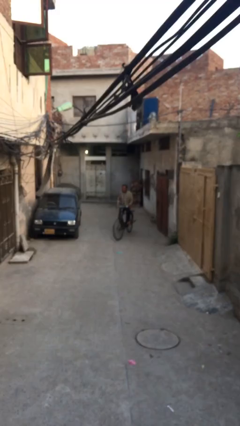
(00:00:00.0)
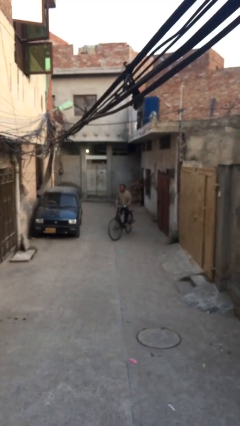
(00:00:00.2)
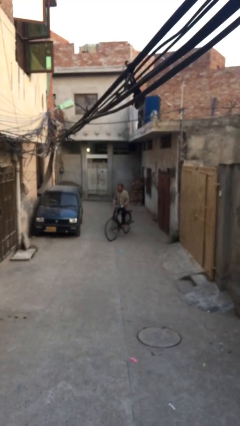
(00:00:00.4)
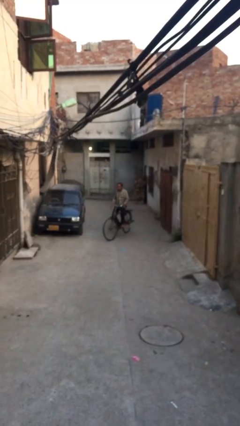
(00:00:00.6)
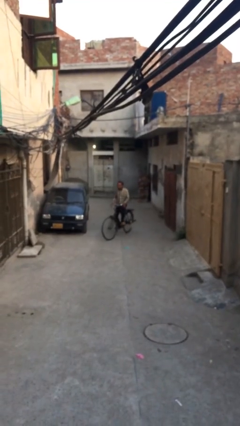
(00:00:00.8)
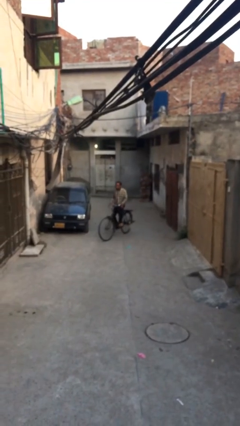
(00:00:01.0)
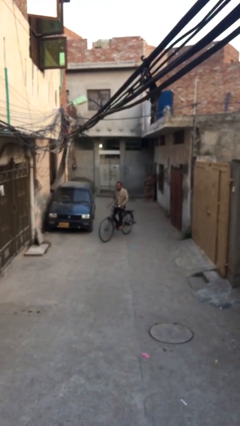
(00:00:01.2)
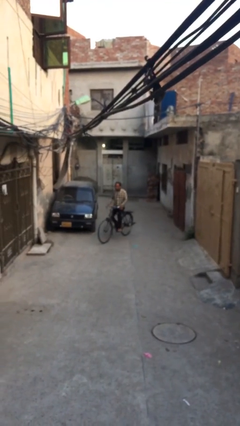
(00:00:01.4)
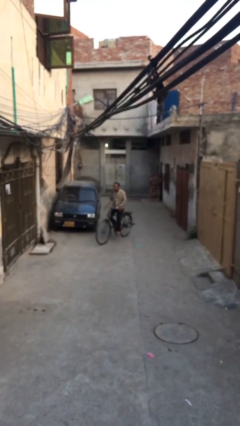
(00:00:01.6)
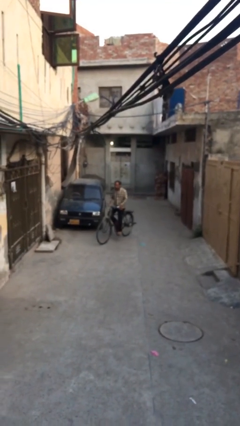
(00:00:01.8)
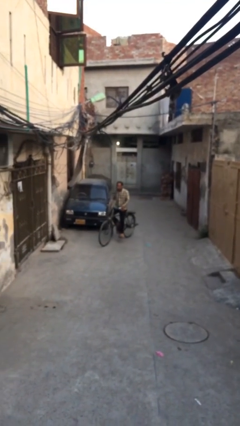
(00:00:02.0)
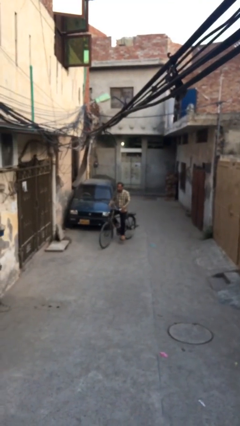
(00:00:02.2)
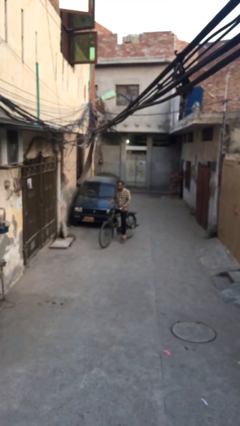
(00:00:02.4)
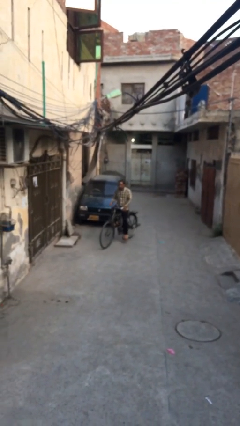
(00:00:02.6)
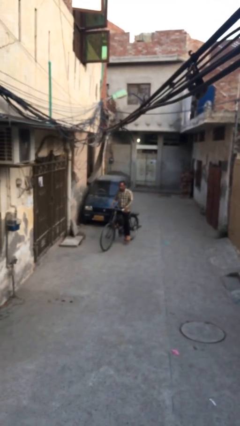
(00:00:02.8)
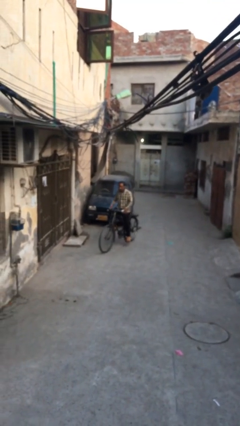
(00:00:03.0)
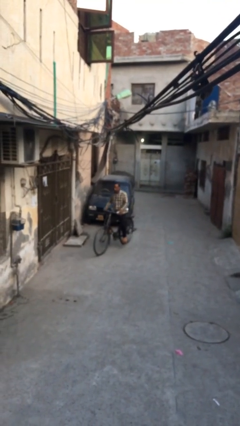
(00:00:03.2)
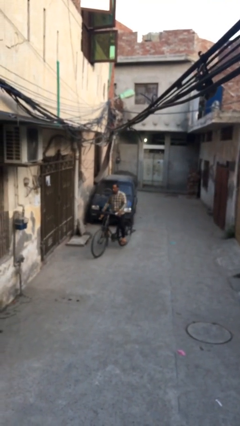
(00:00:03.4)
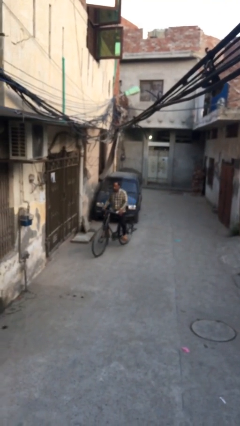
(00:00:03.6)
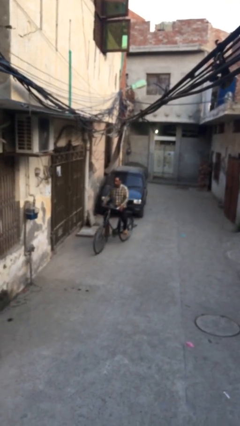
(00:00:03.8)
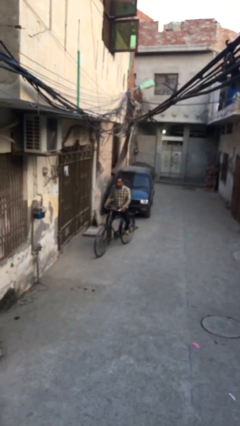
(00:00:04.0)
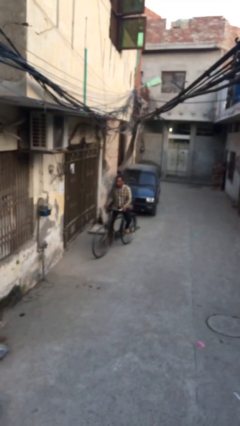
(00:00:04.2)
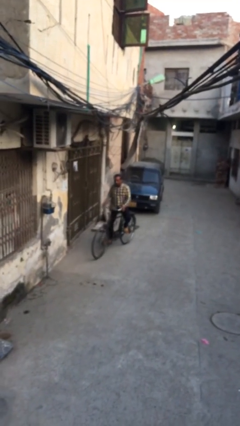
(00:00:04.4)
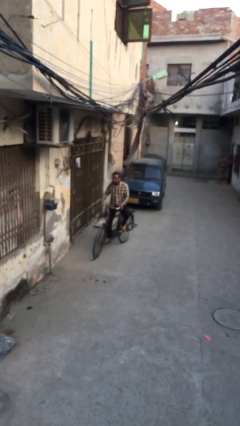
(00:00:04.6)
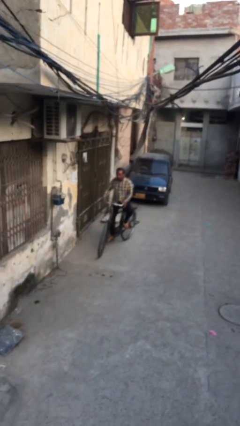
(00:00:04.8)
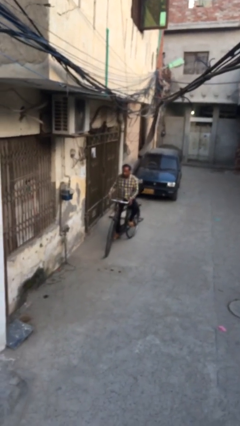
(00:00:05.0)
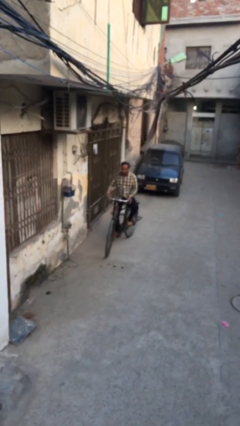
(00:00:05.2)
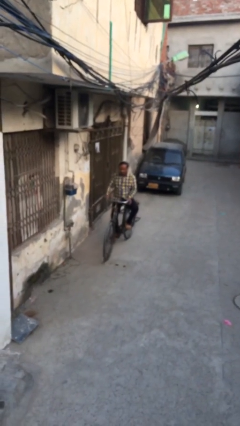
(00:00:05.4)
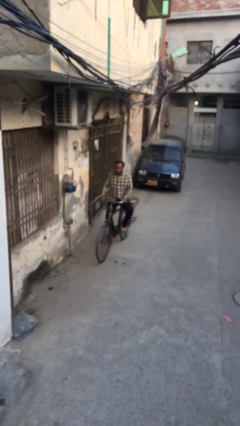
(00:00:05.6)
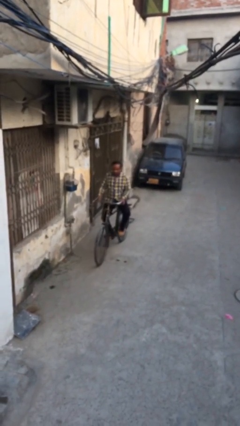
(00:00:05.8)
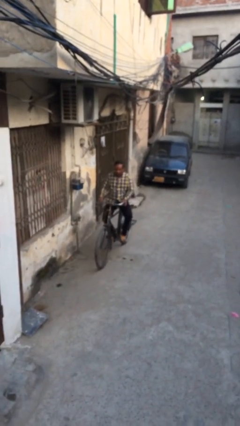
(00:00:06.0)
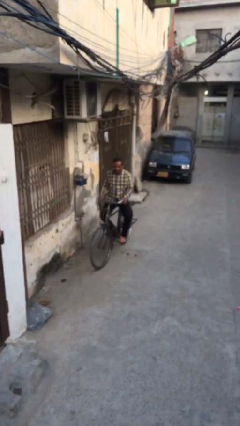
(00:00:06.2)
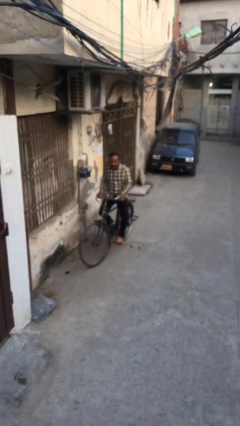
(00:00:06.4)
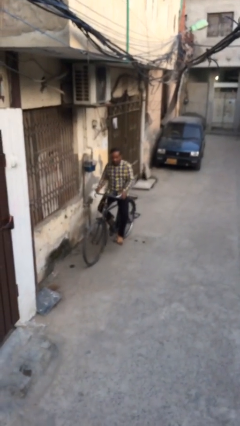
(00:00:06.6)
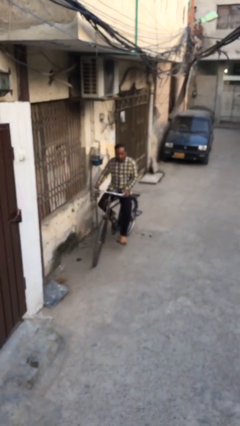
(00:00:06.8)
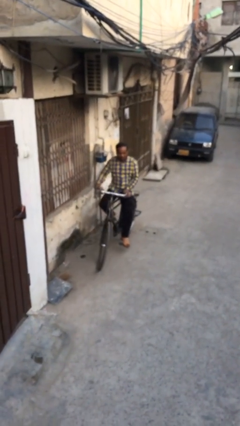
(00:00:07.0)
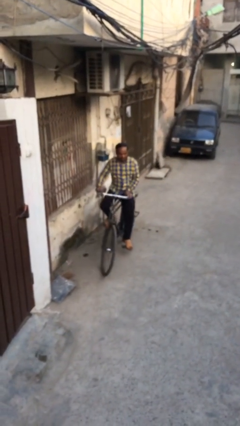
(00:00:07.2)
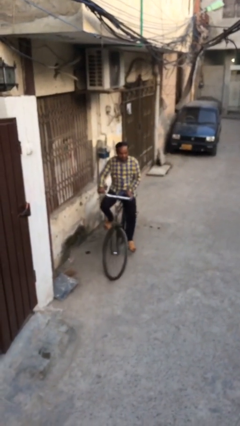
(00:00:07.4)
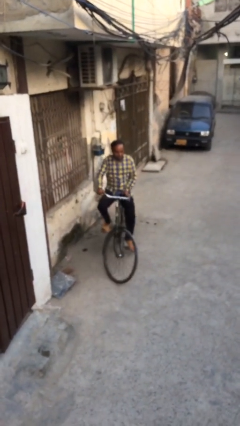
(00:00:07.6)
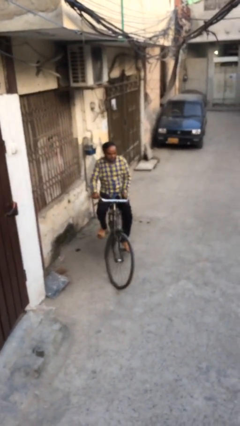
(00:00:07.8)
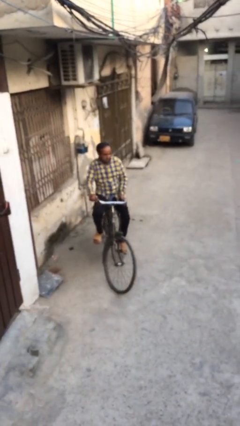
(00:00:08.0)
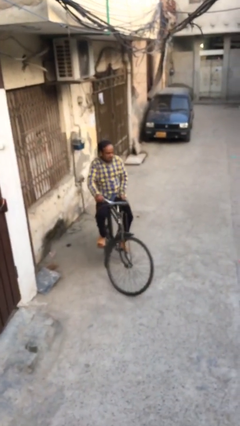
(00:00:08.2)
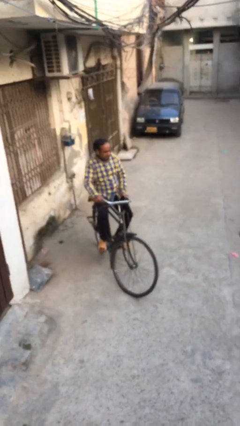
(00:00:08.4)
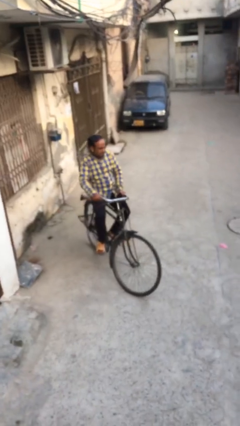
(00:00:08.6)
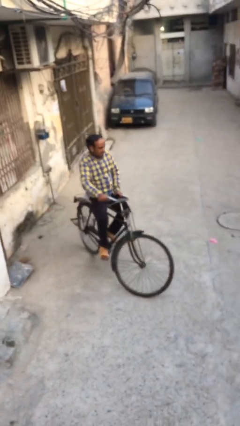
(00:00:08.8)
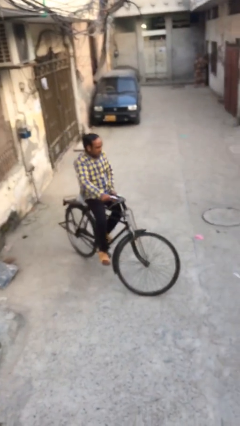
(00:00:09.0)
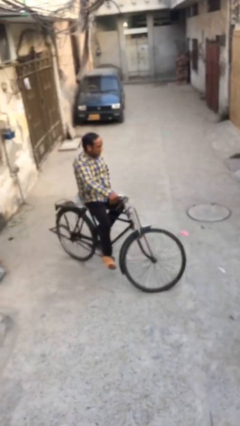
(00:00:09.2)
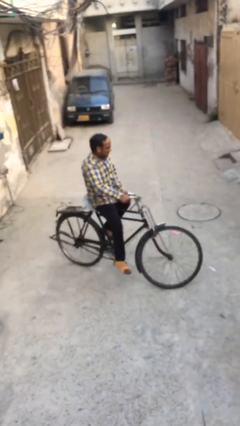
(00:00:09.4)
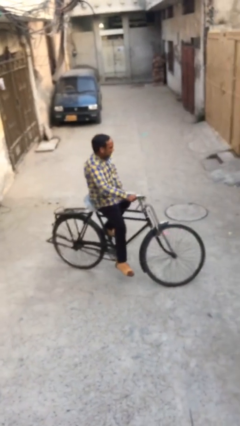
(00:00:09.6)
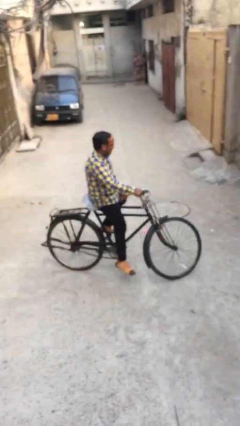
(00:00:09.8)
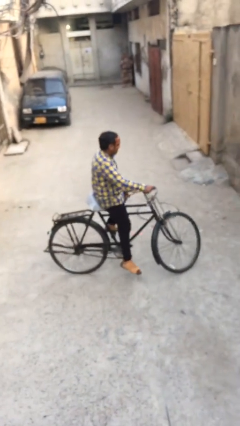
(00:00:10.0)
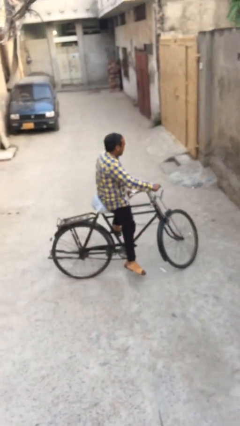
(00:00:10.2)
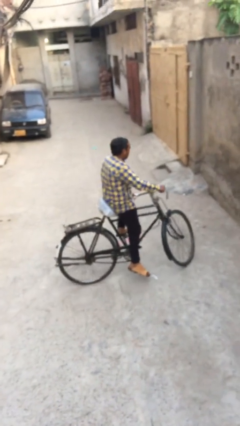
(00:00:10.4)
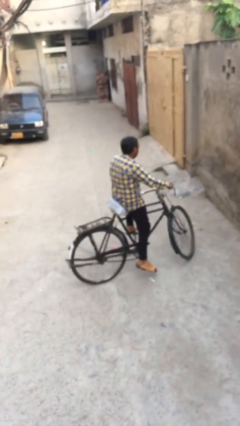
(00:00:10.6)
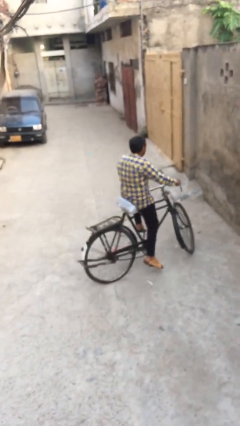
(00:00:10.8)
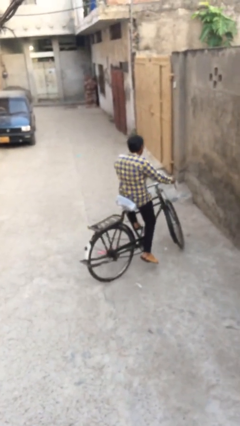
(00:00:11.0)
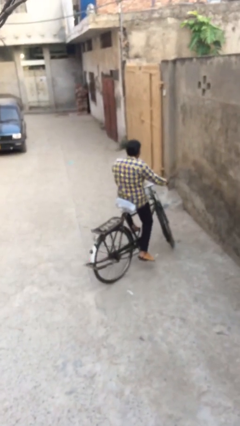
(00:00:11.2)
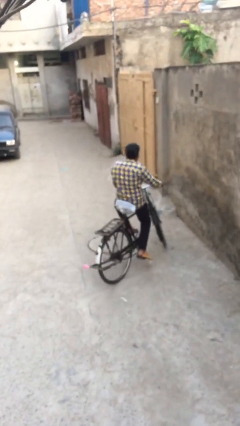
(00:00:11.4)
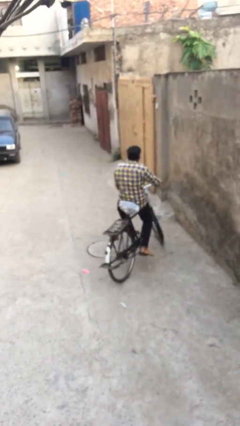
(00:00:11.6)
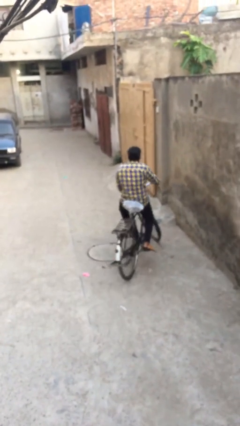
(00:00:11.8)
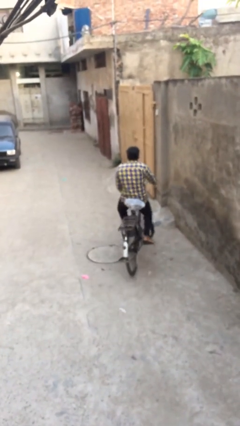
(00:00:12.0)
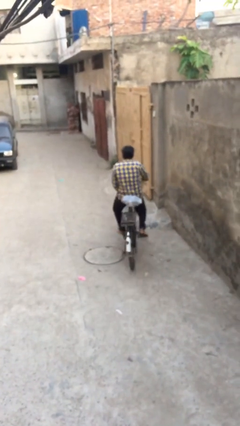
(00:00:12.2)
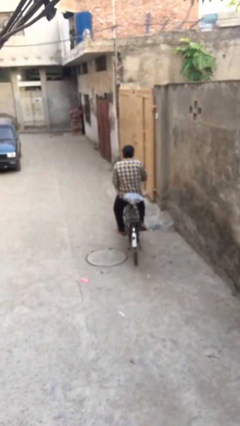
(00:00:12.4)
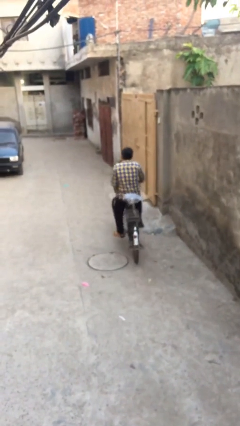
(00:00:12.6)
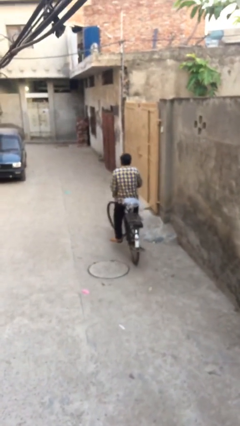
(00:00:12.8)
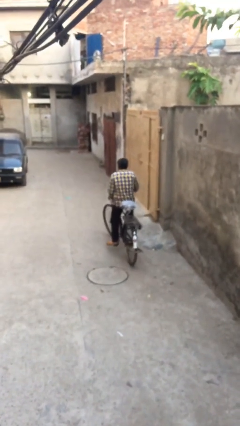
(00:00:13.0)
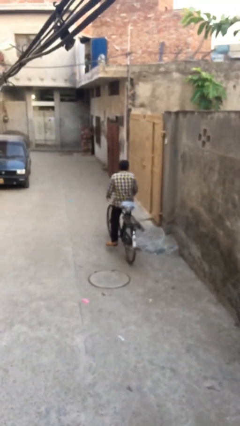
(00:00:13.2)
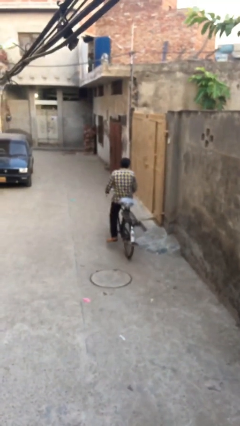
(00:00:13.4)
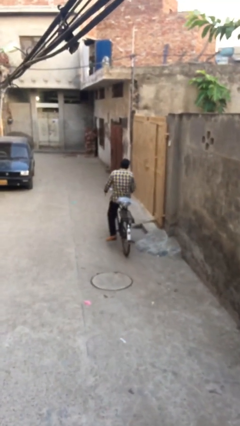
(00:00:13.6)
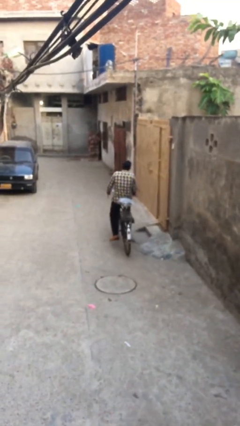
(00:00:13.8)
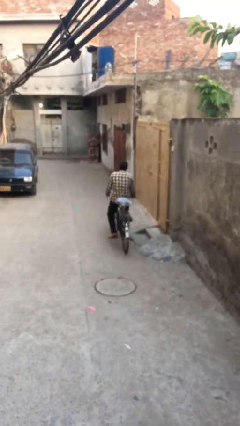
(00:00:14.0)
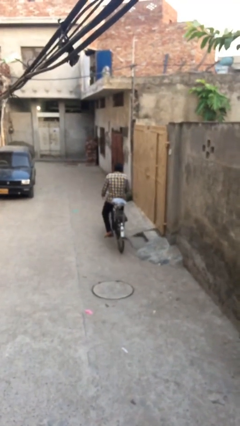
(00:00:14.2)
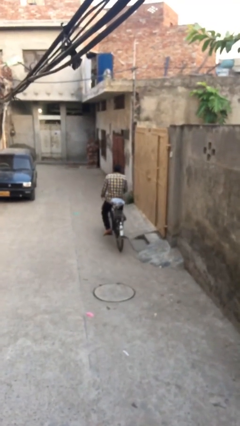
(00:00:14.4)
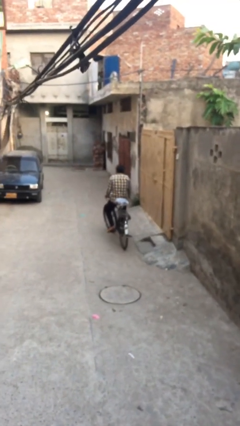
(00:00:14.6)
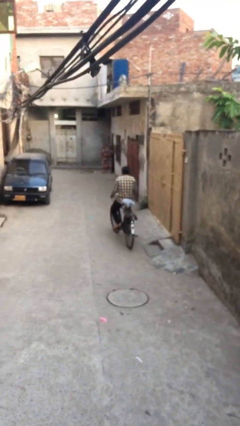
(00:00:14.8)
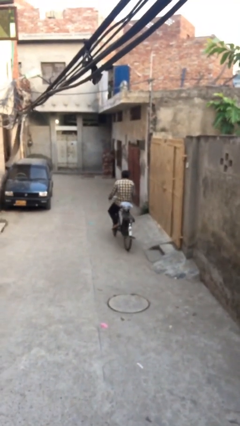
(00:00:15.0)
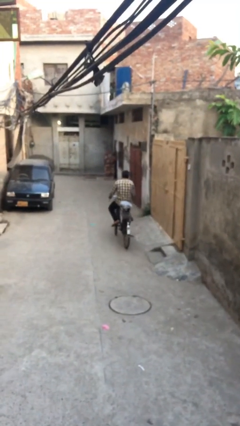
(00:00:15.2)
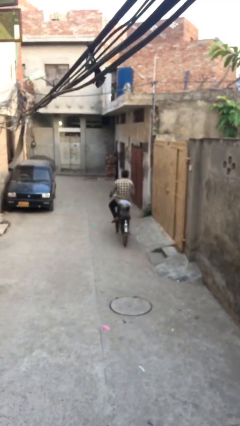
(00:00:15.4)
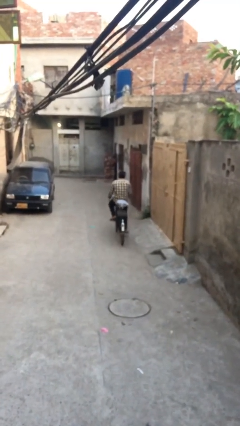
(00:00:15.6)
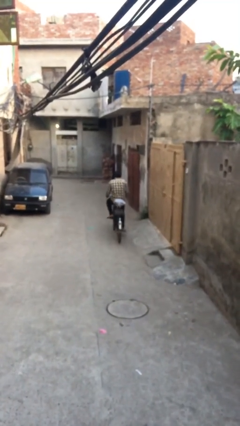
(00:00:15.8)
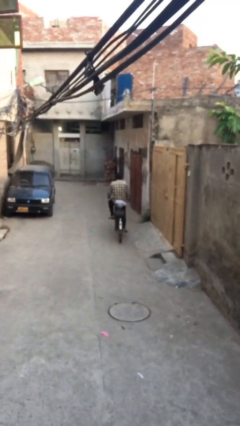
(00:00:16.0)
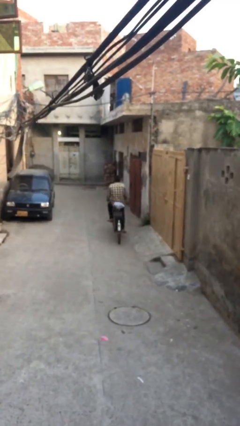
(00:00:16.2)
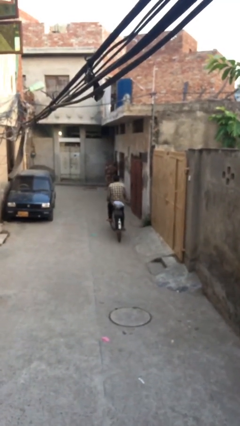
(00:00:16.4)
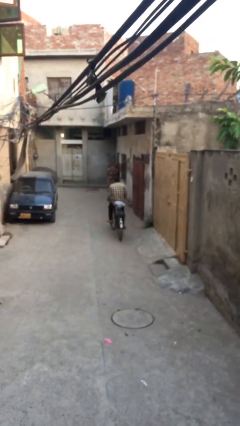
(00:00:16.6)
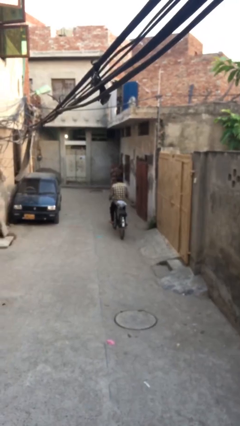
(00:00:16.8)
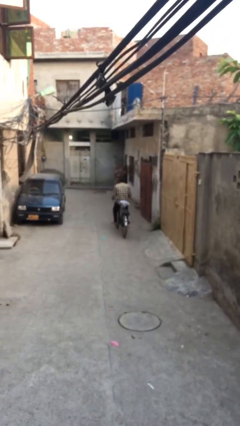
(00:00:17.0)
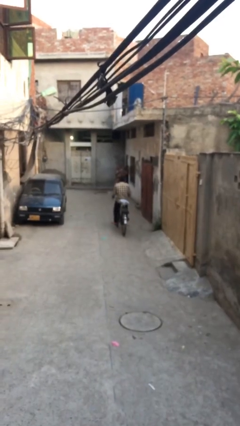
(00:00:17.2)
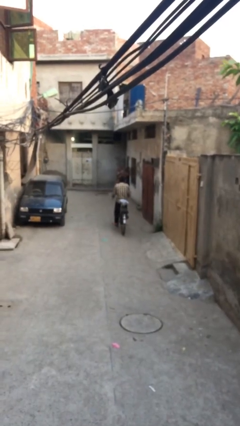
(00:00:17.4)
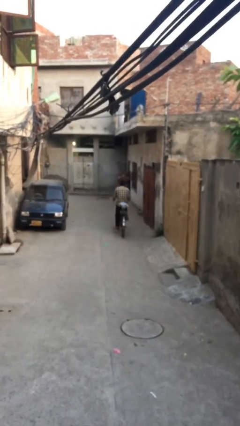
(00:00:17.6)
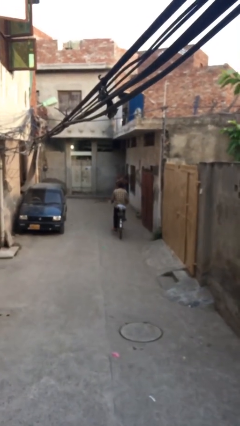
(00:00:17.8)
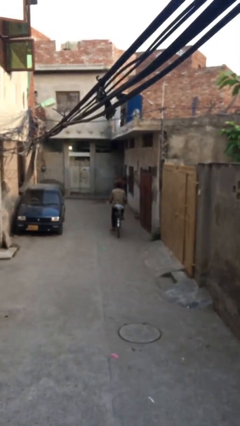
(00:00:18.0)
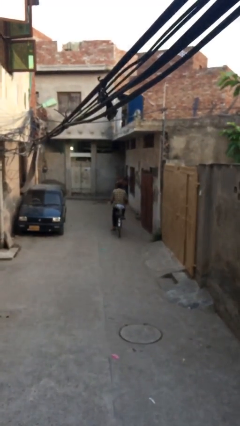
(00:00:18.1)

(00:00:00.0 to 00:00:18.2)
person rides bicycle
